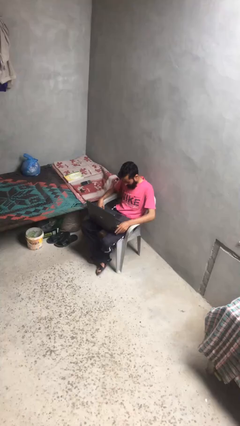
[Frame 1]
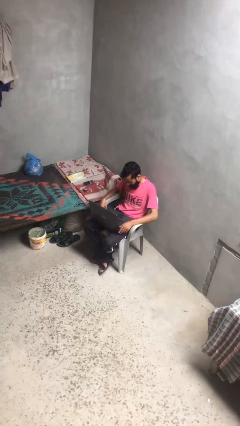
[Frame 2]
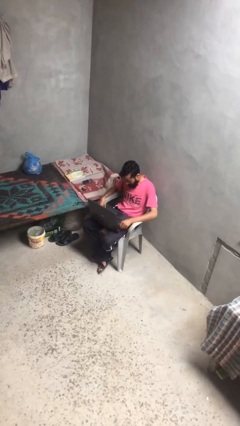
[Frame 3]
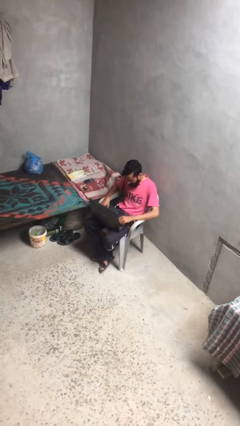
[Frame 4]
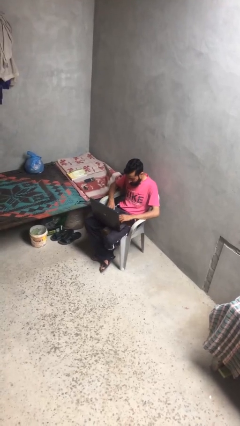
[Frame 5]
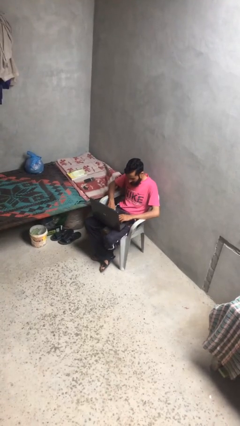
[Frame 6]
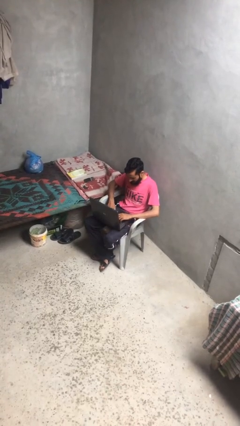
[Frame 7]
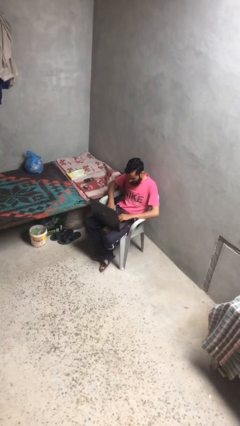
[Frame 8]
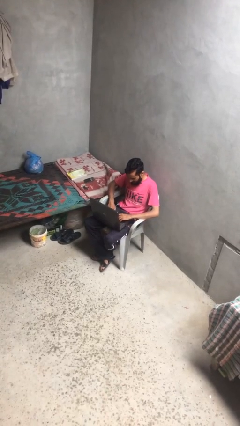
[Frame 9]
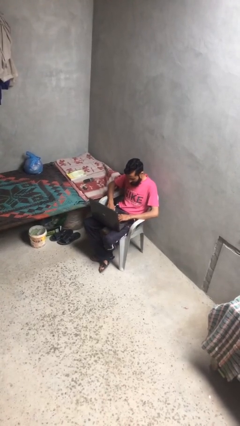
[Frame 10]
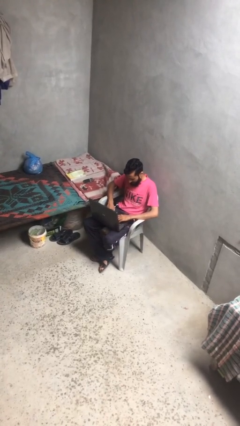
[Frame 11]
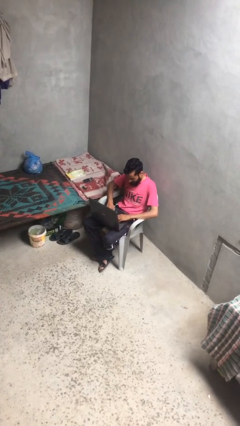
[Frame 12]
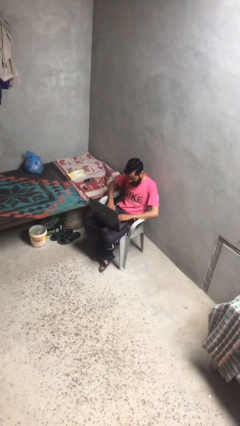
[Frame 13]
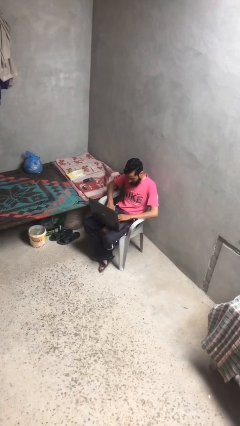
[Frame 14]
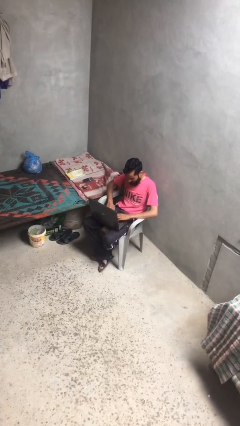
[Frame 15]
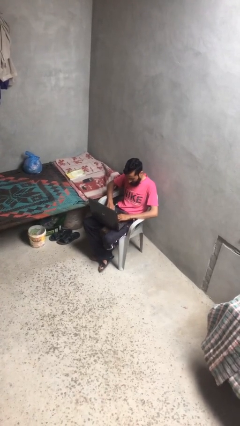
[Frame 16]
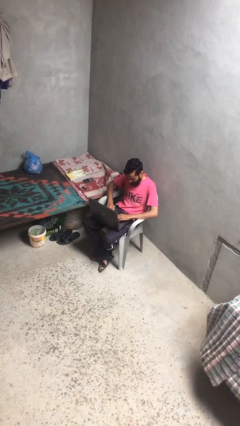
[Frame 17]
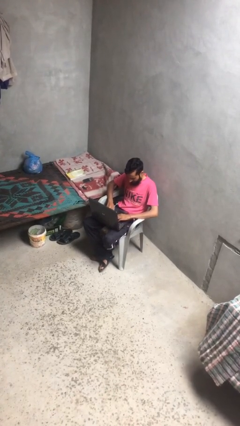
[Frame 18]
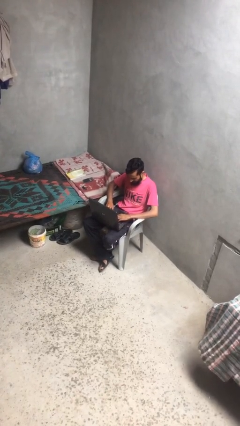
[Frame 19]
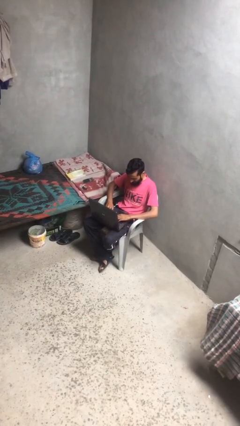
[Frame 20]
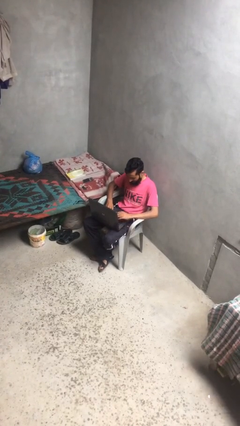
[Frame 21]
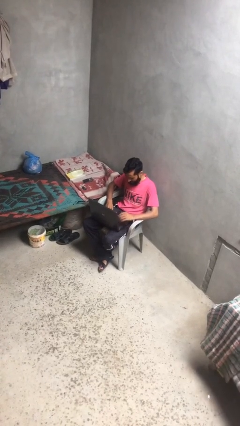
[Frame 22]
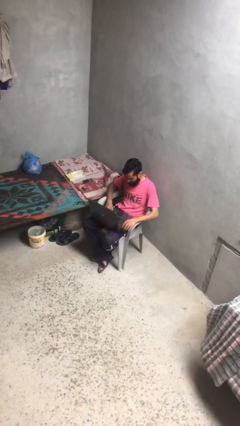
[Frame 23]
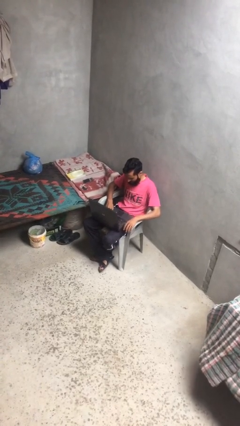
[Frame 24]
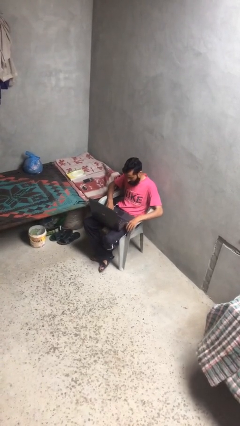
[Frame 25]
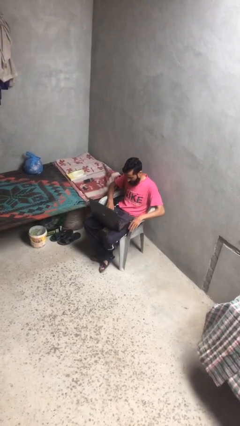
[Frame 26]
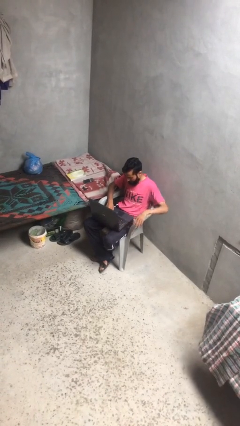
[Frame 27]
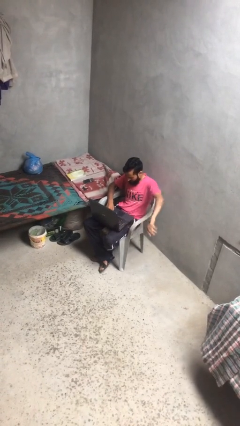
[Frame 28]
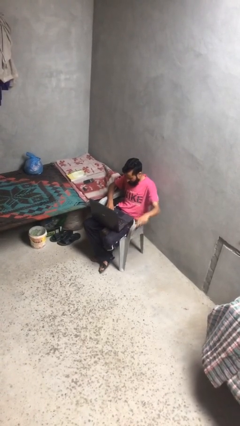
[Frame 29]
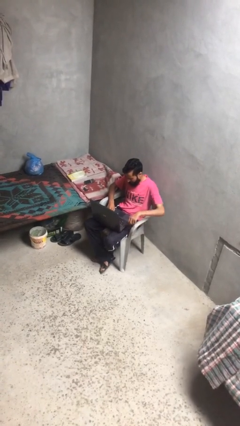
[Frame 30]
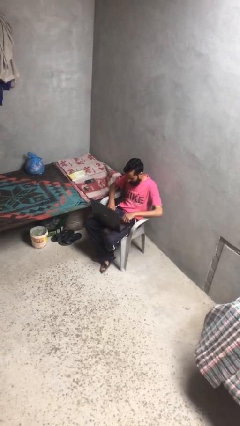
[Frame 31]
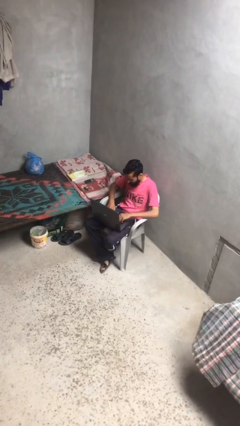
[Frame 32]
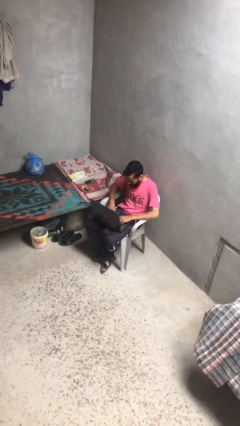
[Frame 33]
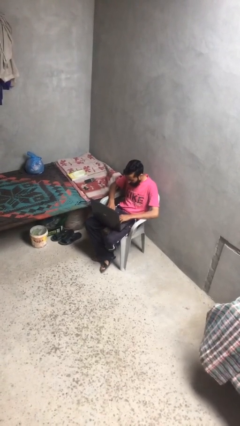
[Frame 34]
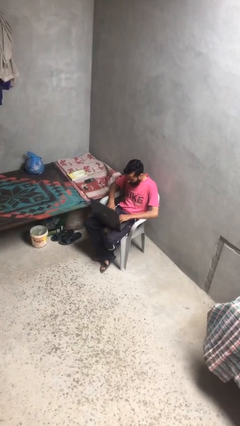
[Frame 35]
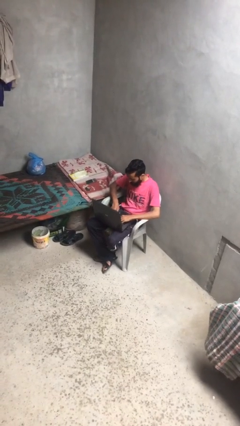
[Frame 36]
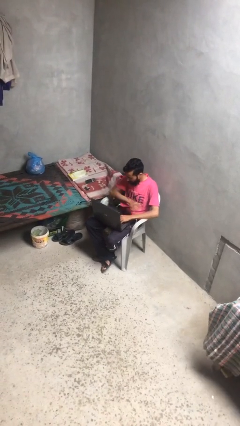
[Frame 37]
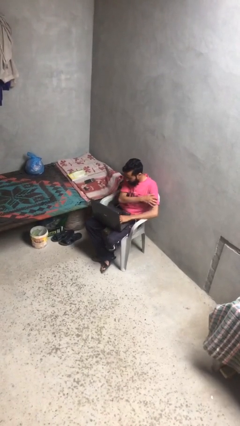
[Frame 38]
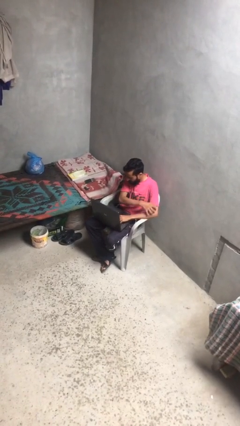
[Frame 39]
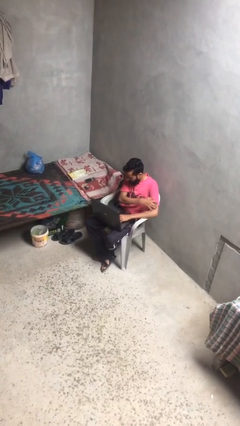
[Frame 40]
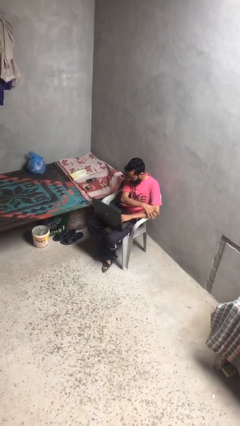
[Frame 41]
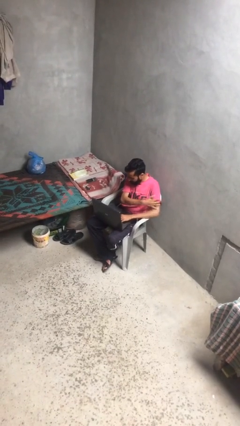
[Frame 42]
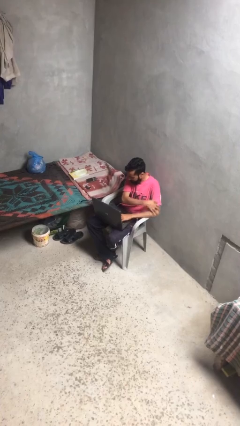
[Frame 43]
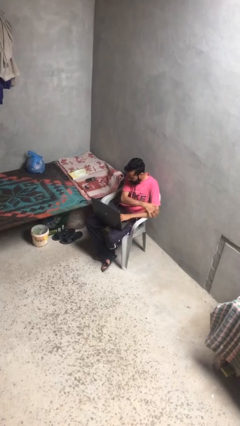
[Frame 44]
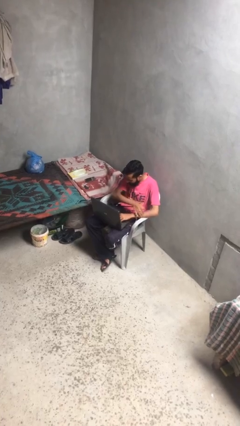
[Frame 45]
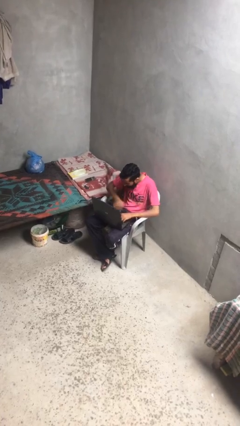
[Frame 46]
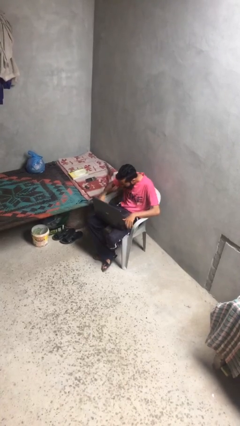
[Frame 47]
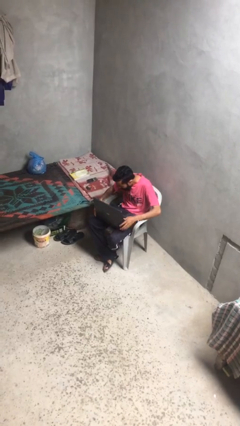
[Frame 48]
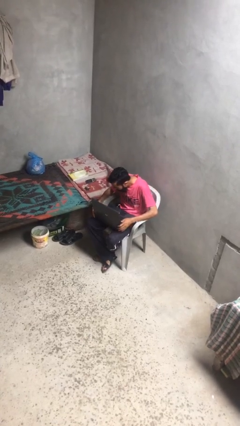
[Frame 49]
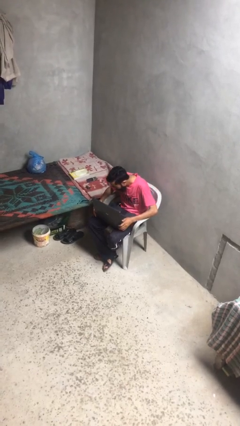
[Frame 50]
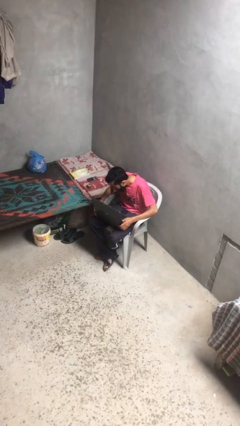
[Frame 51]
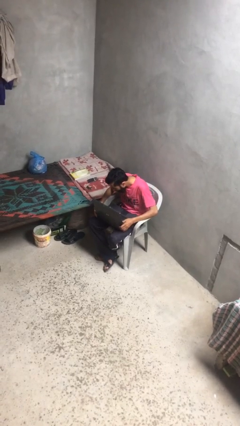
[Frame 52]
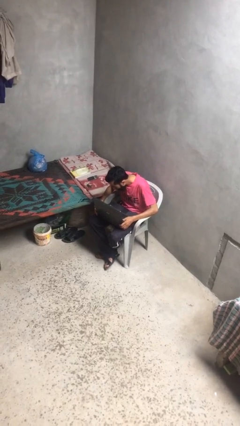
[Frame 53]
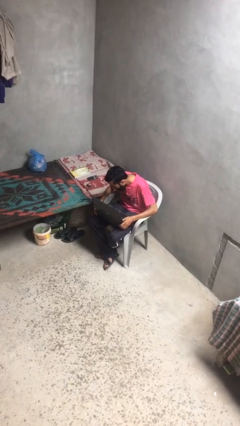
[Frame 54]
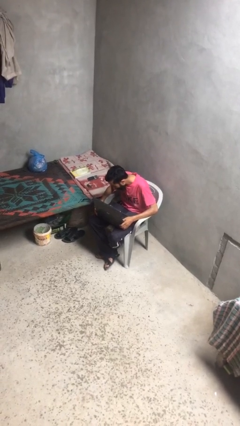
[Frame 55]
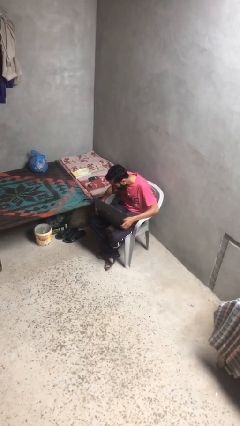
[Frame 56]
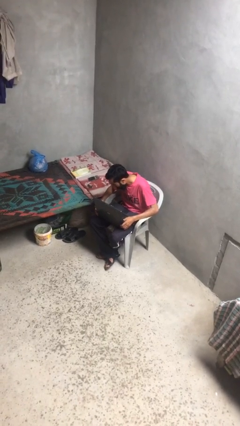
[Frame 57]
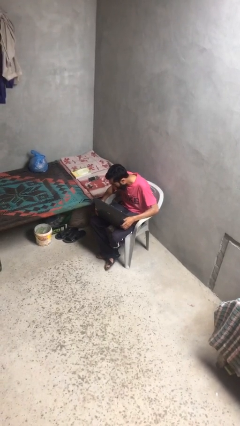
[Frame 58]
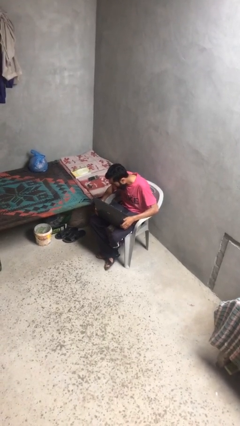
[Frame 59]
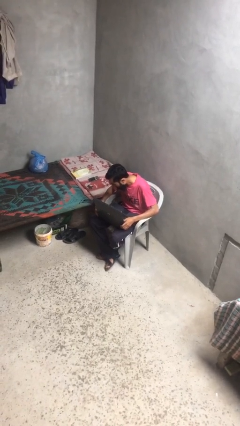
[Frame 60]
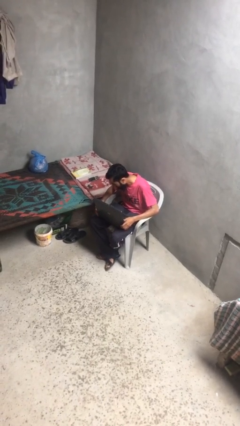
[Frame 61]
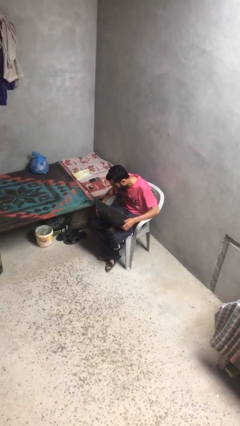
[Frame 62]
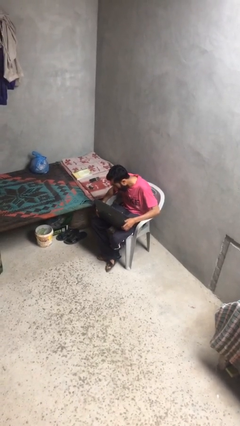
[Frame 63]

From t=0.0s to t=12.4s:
person interacts with laptop

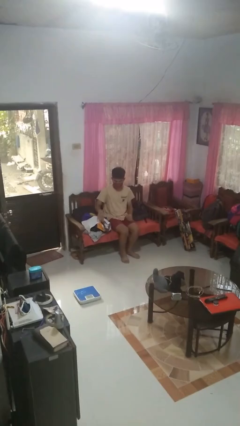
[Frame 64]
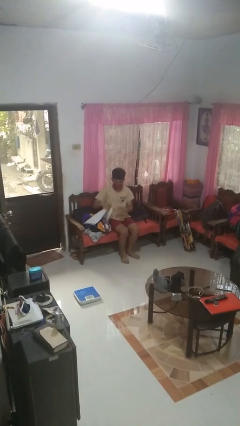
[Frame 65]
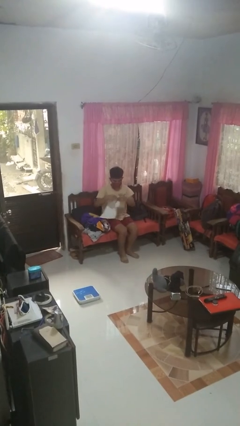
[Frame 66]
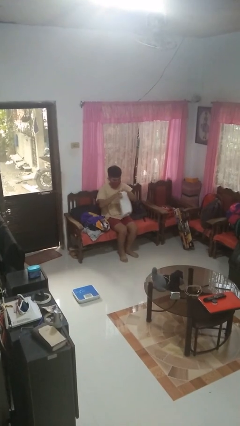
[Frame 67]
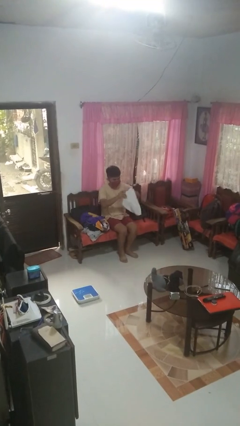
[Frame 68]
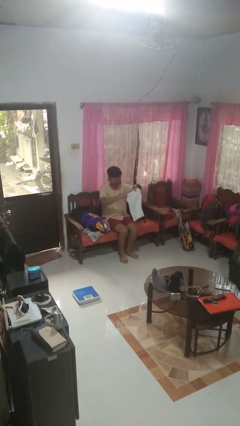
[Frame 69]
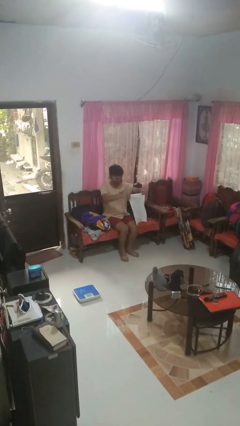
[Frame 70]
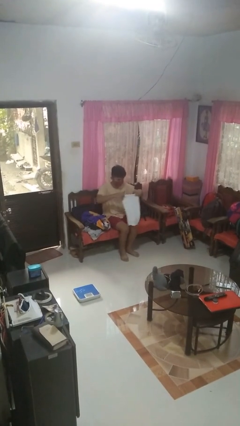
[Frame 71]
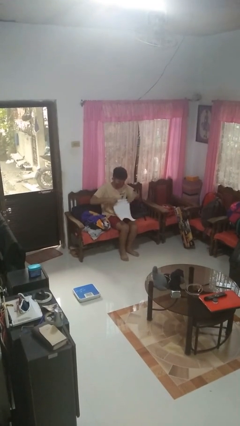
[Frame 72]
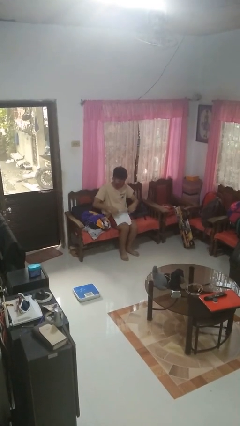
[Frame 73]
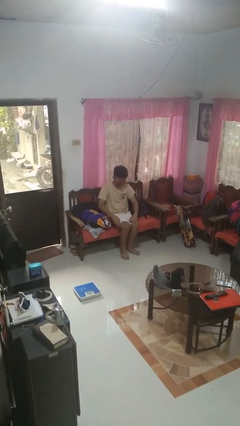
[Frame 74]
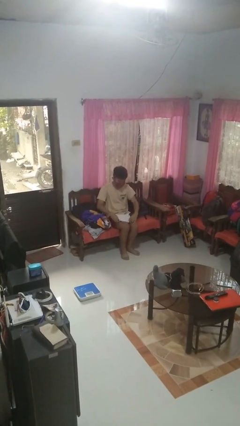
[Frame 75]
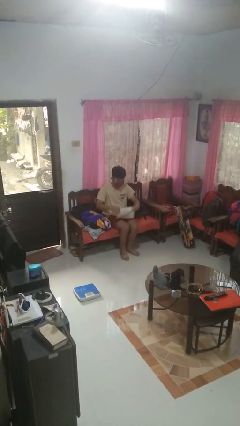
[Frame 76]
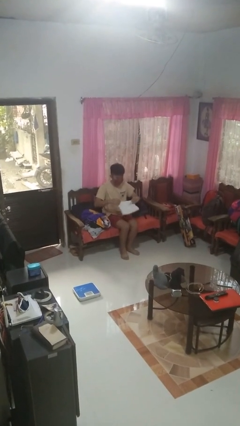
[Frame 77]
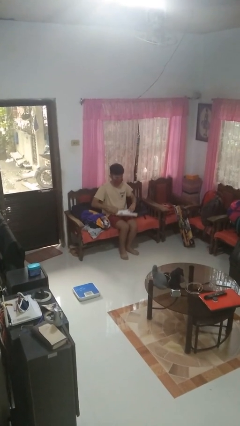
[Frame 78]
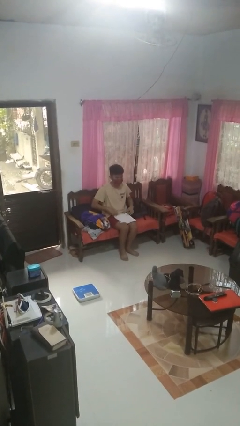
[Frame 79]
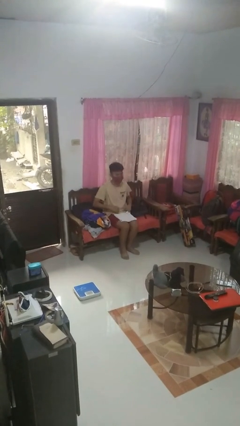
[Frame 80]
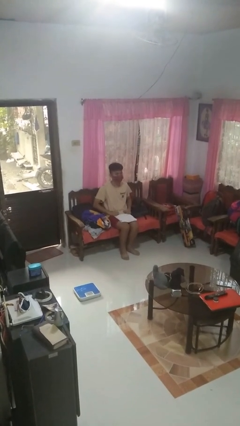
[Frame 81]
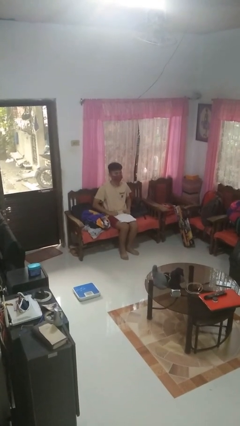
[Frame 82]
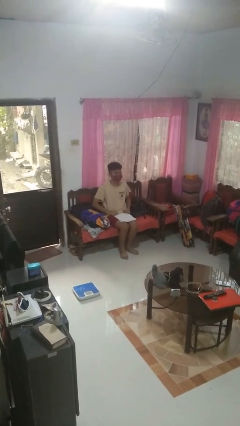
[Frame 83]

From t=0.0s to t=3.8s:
person folds towel

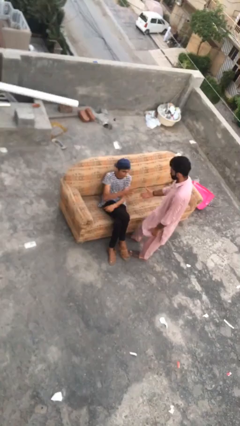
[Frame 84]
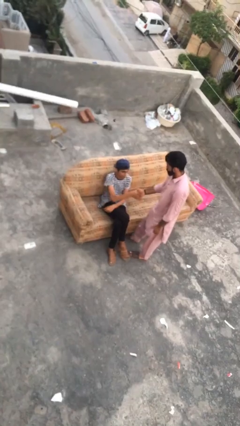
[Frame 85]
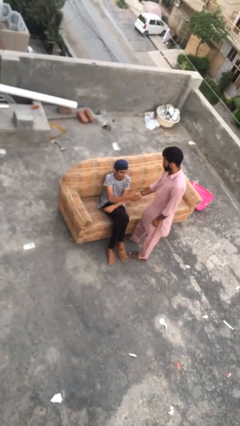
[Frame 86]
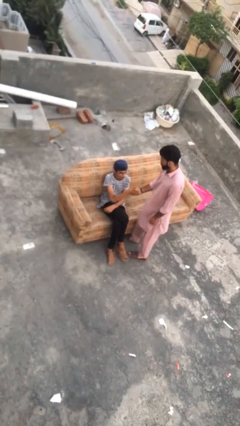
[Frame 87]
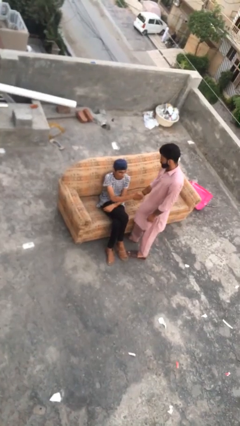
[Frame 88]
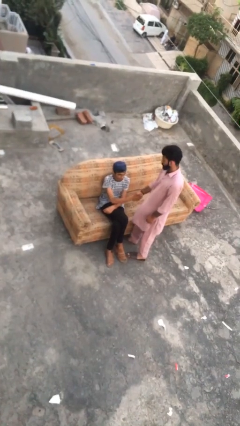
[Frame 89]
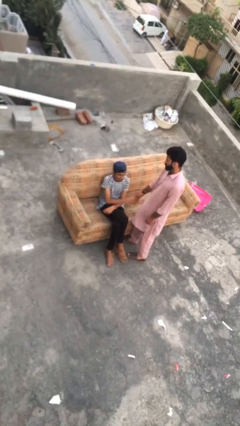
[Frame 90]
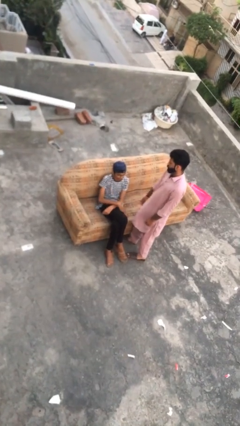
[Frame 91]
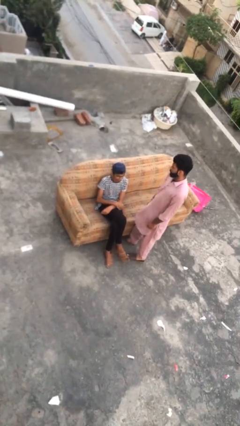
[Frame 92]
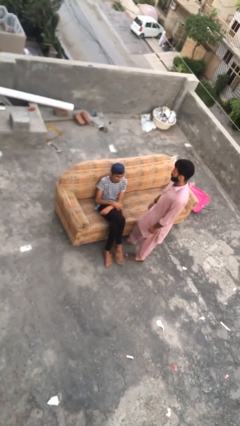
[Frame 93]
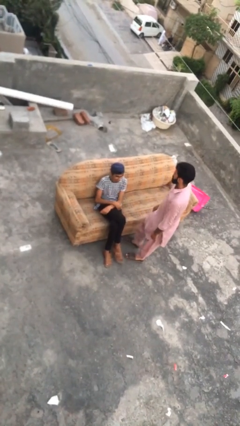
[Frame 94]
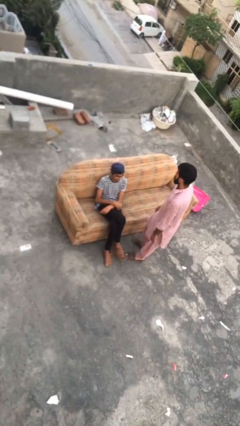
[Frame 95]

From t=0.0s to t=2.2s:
person shakes hand
